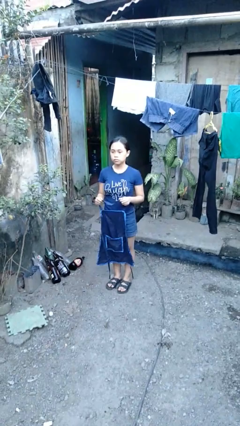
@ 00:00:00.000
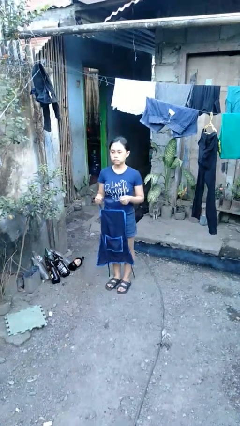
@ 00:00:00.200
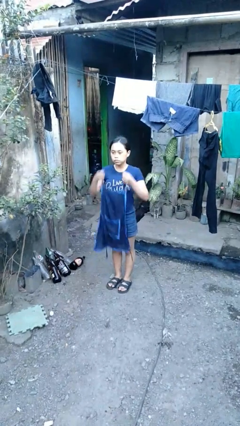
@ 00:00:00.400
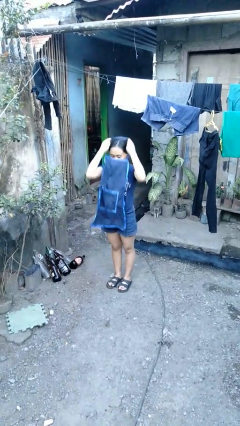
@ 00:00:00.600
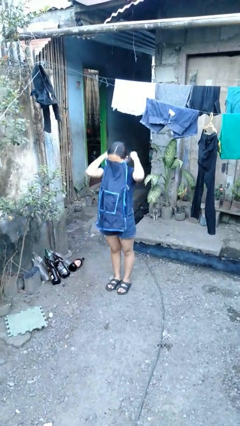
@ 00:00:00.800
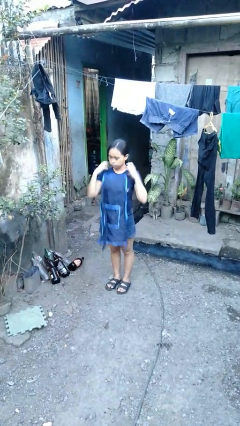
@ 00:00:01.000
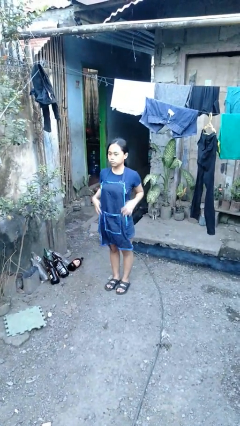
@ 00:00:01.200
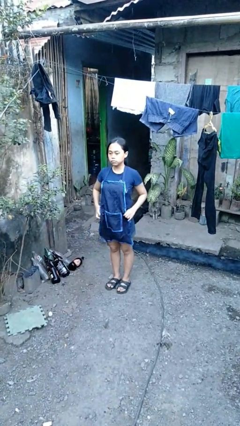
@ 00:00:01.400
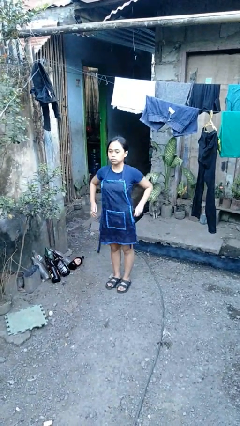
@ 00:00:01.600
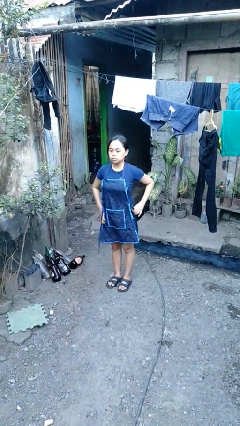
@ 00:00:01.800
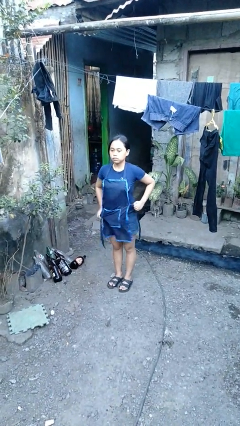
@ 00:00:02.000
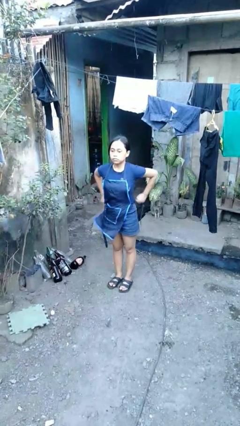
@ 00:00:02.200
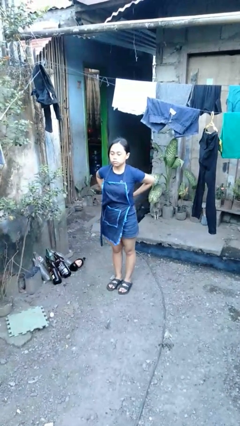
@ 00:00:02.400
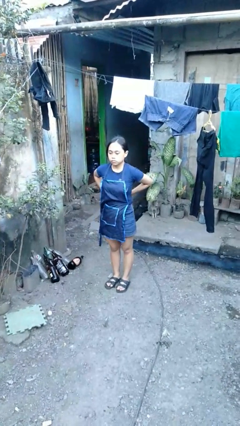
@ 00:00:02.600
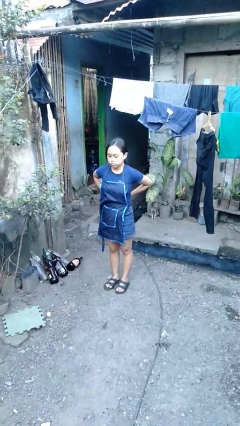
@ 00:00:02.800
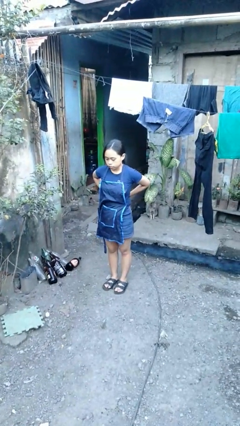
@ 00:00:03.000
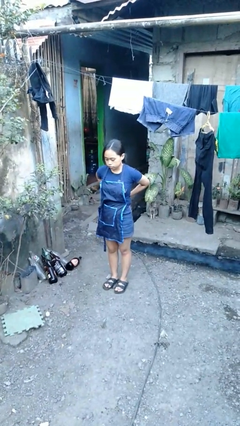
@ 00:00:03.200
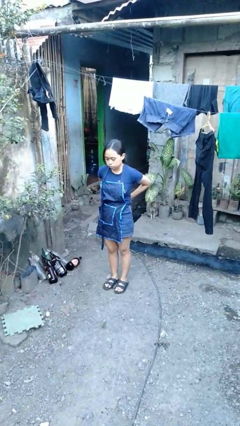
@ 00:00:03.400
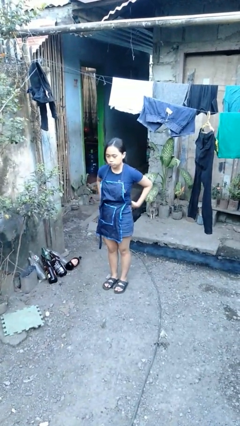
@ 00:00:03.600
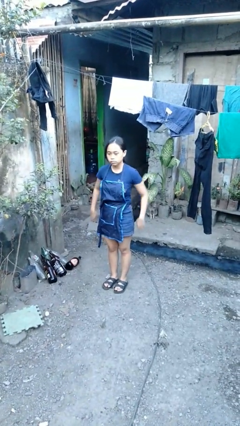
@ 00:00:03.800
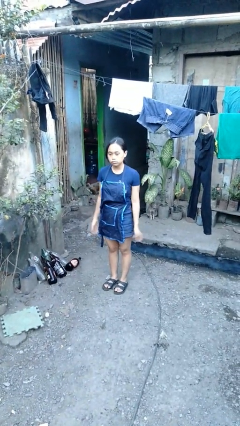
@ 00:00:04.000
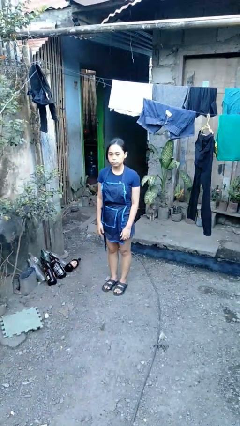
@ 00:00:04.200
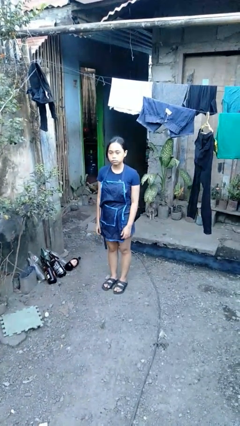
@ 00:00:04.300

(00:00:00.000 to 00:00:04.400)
person puts on apron

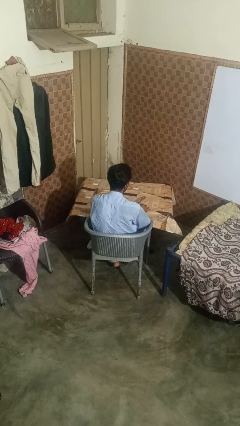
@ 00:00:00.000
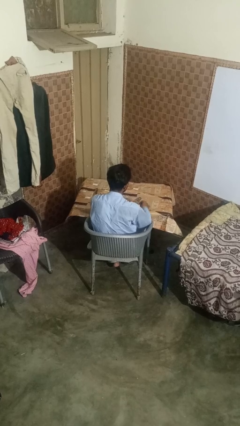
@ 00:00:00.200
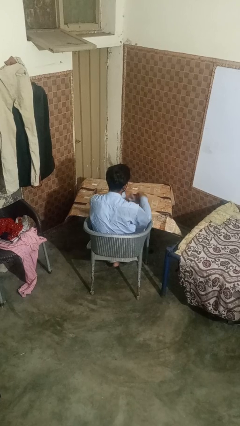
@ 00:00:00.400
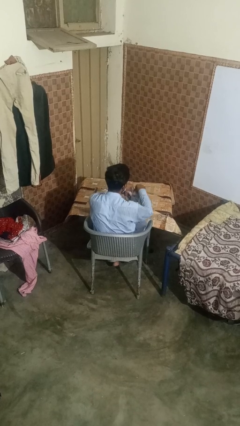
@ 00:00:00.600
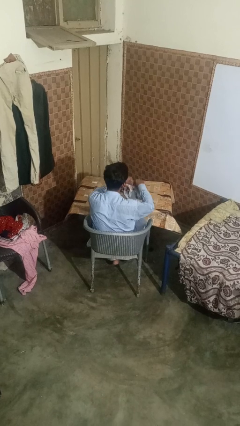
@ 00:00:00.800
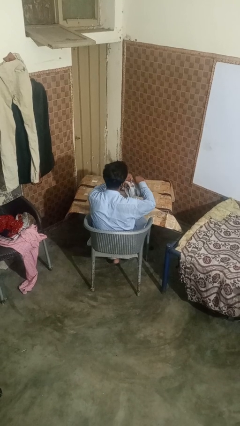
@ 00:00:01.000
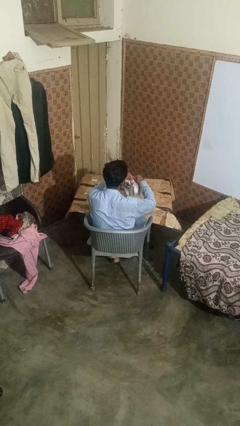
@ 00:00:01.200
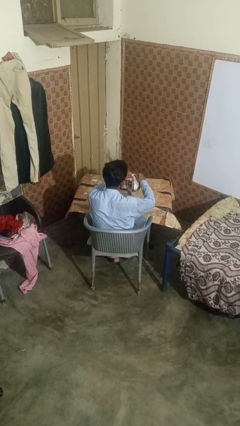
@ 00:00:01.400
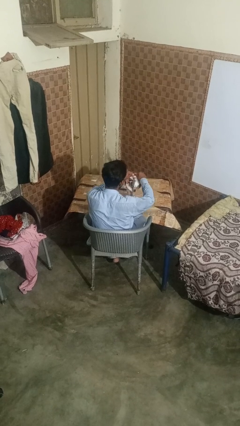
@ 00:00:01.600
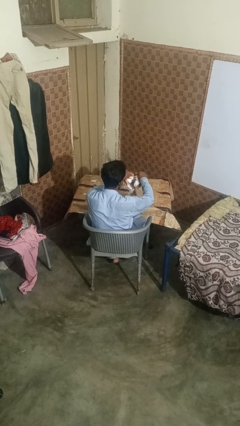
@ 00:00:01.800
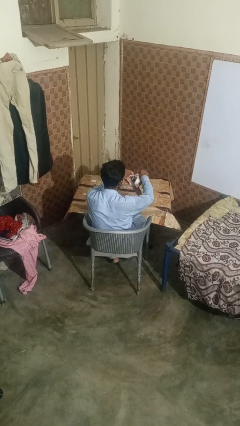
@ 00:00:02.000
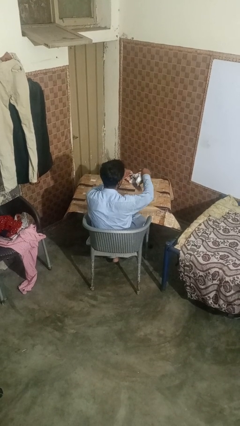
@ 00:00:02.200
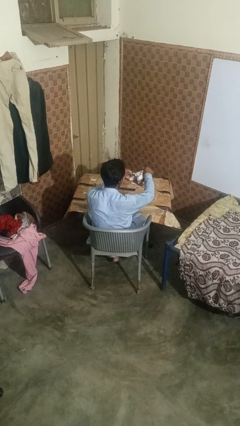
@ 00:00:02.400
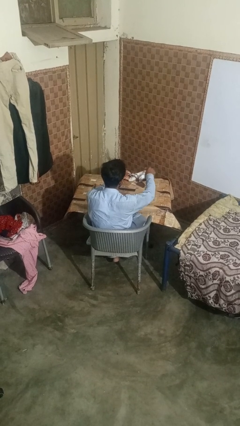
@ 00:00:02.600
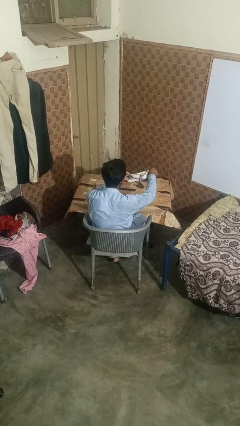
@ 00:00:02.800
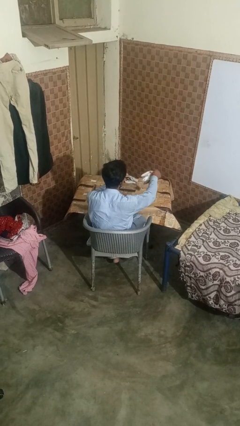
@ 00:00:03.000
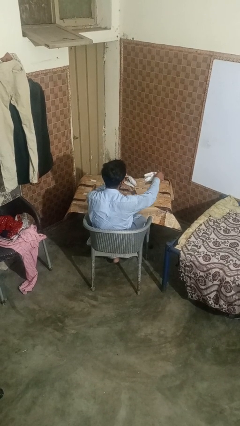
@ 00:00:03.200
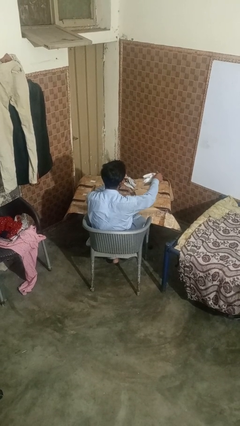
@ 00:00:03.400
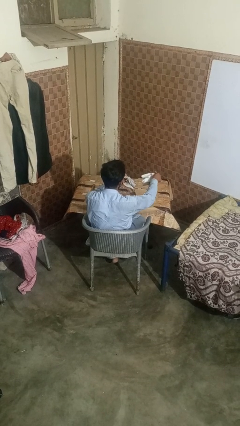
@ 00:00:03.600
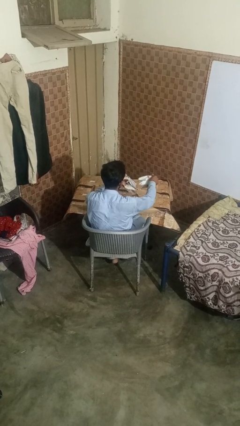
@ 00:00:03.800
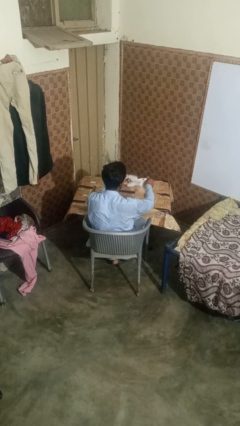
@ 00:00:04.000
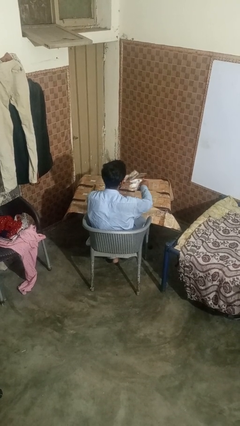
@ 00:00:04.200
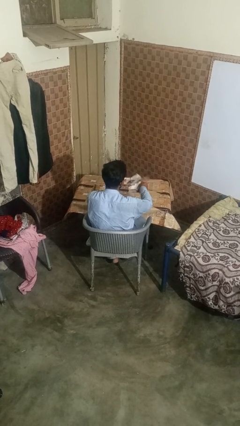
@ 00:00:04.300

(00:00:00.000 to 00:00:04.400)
person tears paper

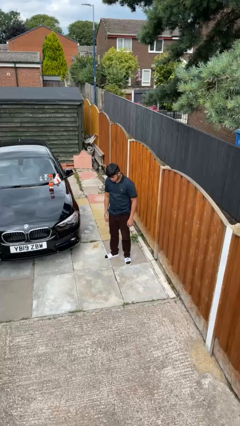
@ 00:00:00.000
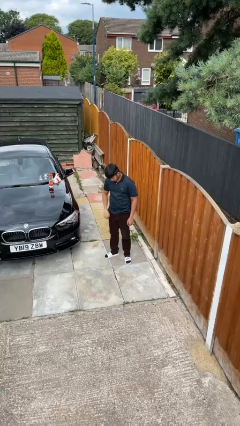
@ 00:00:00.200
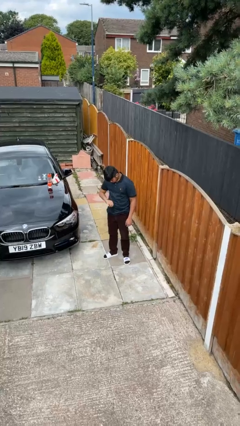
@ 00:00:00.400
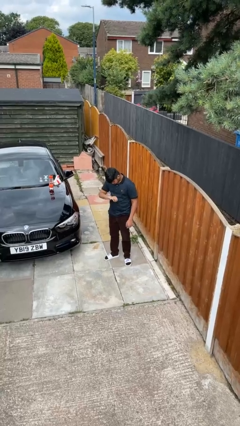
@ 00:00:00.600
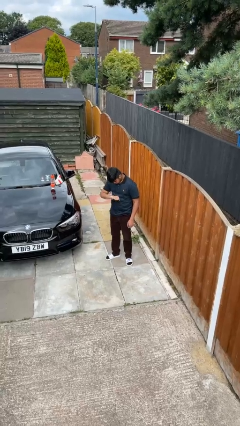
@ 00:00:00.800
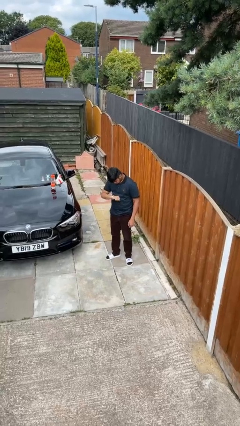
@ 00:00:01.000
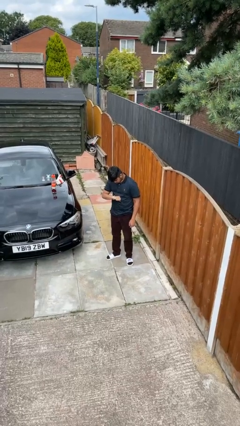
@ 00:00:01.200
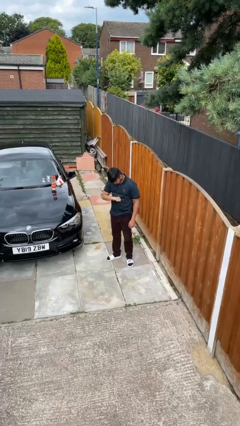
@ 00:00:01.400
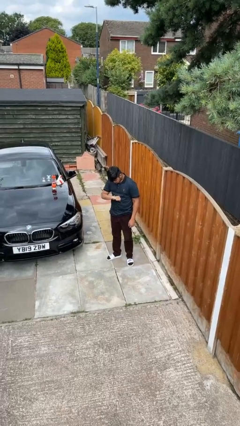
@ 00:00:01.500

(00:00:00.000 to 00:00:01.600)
person looks at wristwatch

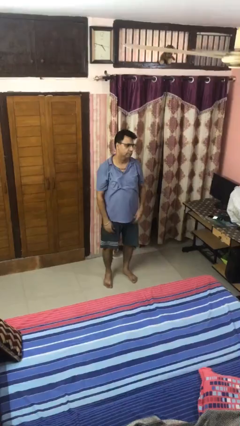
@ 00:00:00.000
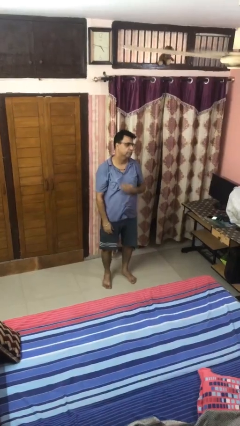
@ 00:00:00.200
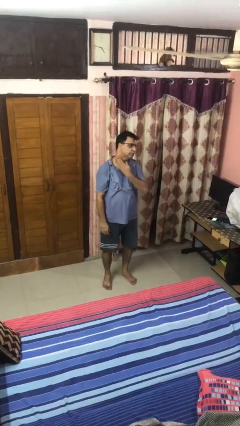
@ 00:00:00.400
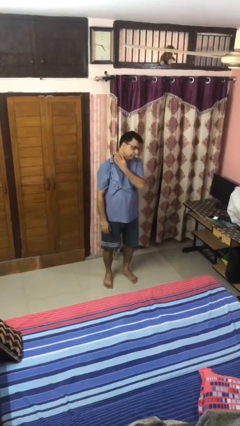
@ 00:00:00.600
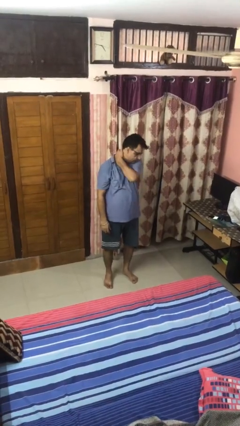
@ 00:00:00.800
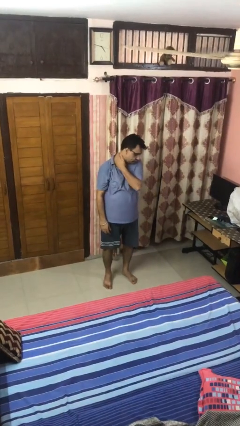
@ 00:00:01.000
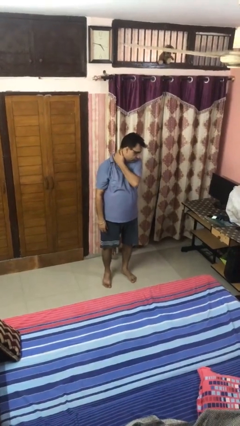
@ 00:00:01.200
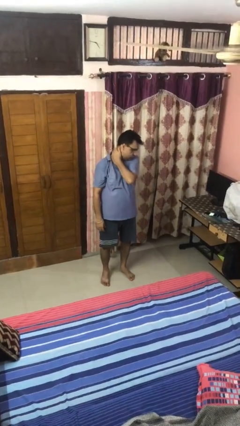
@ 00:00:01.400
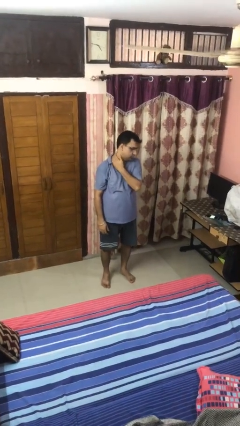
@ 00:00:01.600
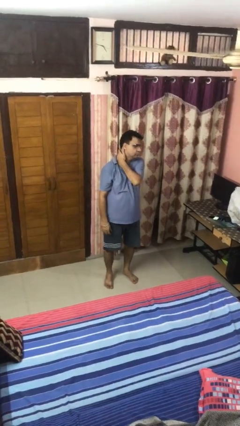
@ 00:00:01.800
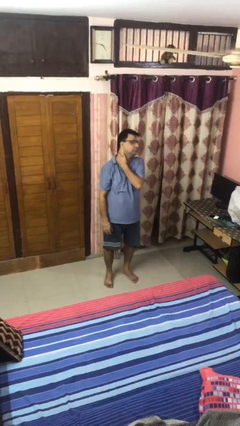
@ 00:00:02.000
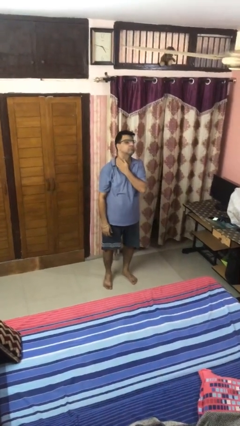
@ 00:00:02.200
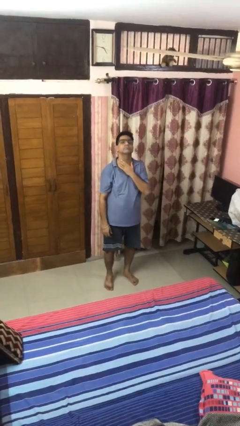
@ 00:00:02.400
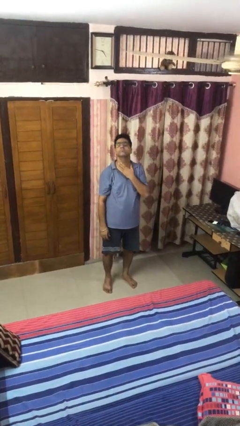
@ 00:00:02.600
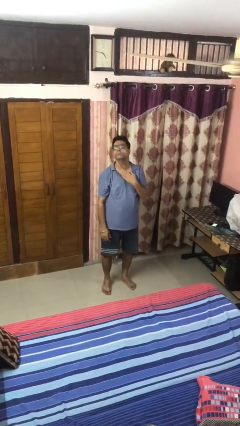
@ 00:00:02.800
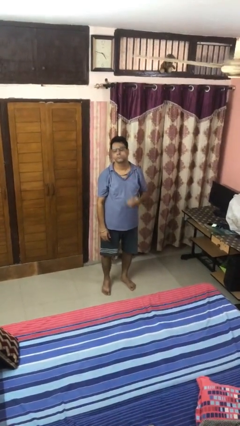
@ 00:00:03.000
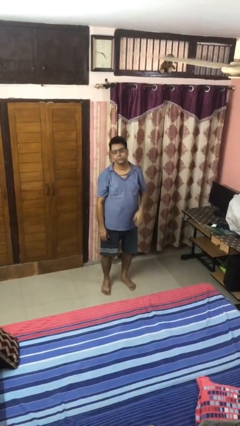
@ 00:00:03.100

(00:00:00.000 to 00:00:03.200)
person rubs neck

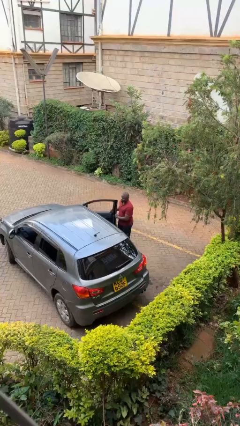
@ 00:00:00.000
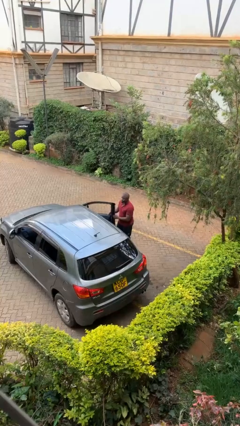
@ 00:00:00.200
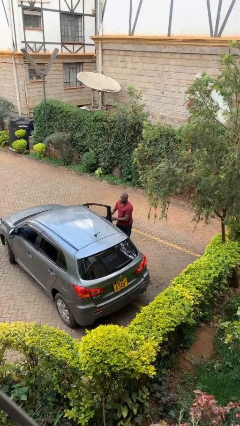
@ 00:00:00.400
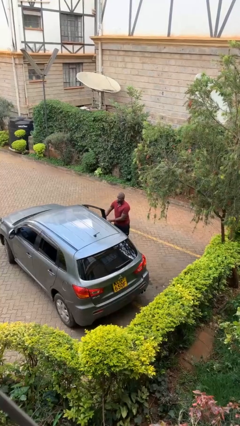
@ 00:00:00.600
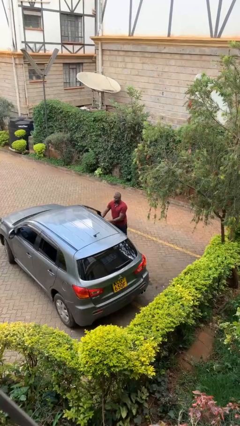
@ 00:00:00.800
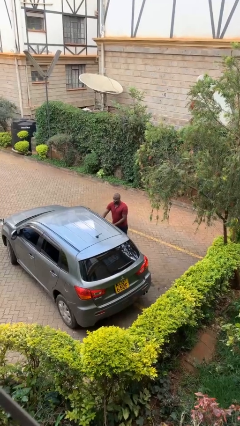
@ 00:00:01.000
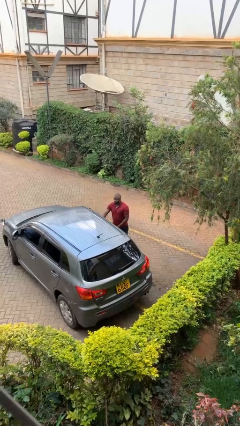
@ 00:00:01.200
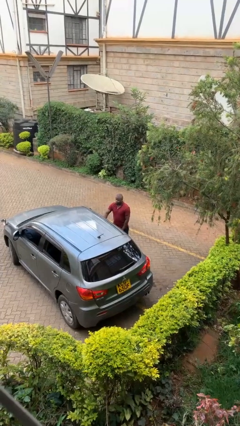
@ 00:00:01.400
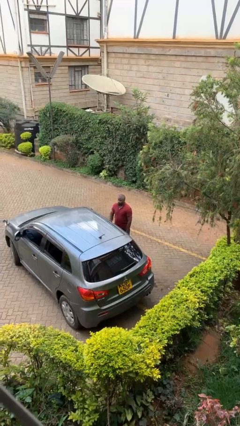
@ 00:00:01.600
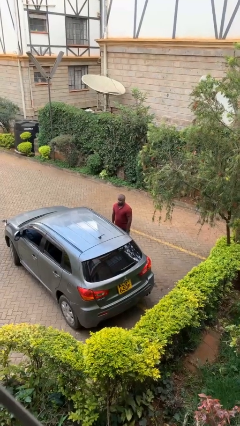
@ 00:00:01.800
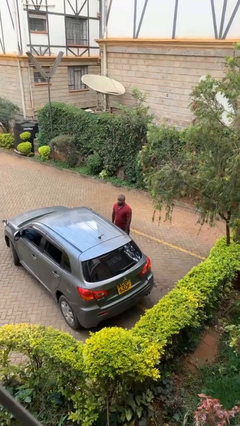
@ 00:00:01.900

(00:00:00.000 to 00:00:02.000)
person closes car door

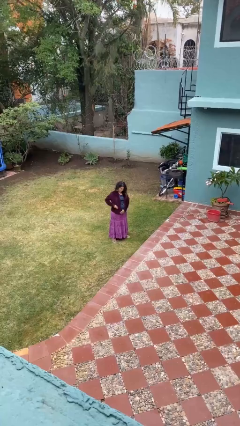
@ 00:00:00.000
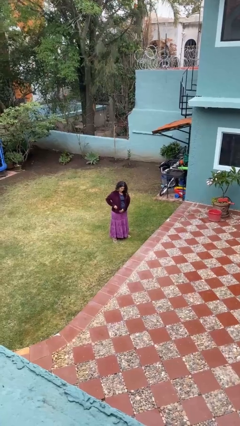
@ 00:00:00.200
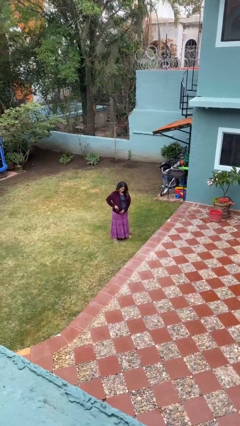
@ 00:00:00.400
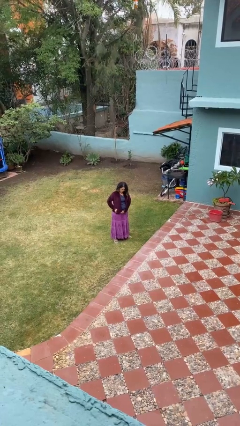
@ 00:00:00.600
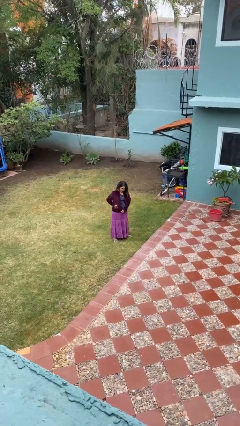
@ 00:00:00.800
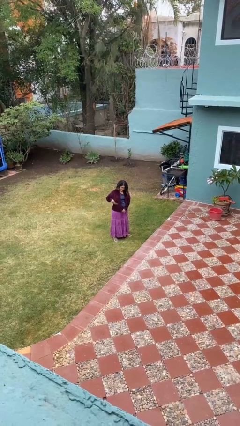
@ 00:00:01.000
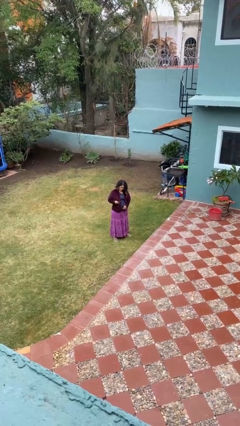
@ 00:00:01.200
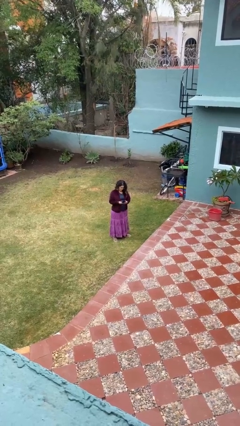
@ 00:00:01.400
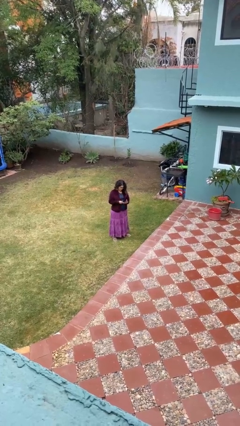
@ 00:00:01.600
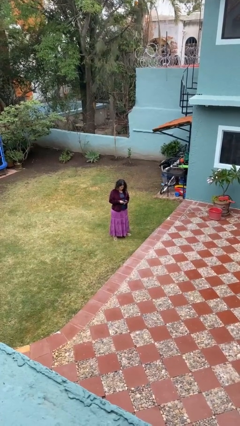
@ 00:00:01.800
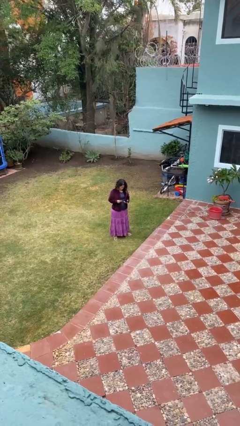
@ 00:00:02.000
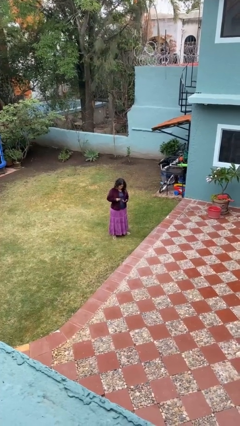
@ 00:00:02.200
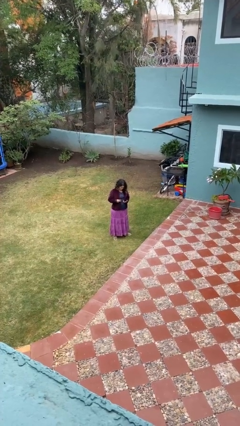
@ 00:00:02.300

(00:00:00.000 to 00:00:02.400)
person takes phone from pocket
